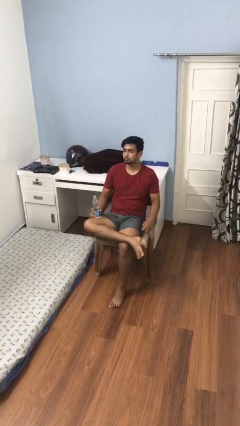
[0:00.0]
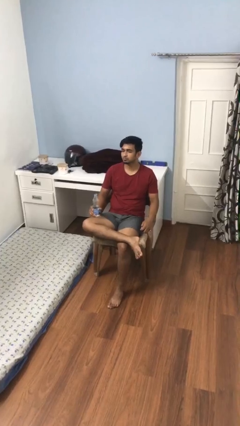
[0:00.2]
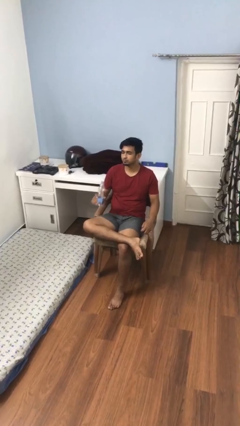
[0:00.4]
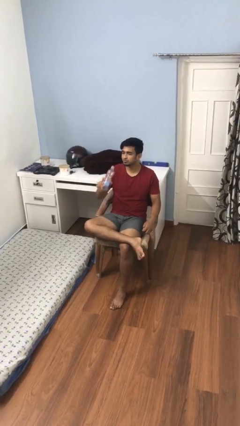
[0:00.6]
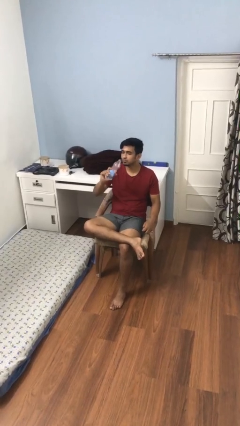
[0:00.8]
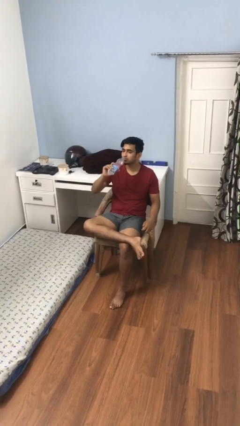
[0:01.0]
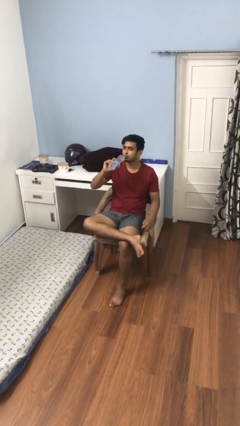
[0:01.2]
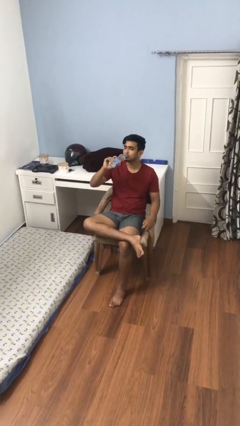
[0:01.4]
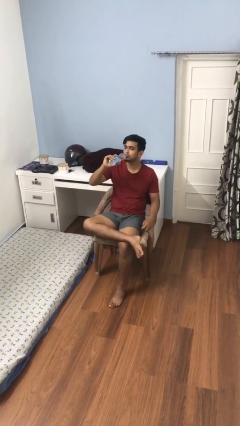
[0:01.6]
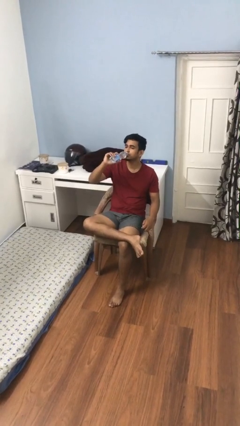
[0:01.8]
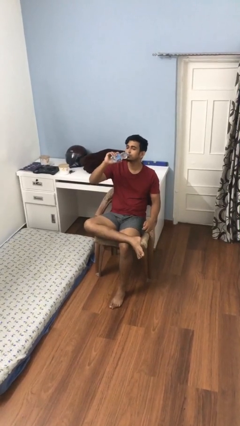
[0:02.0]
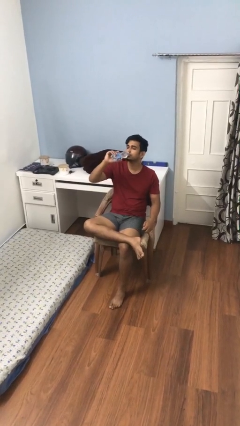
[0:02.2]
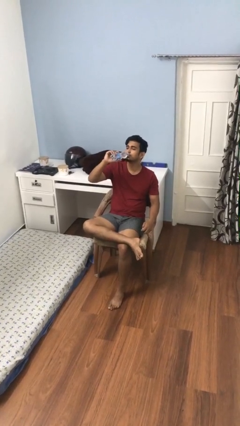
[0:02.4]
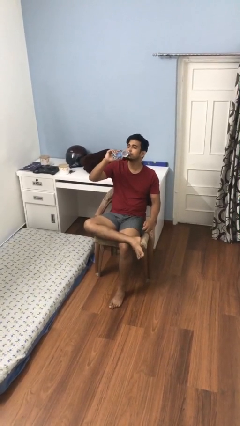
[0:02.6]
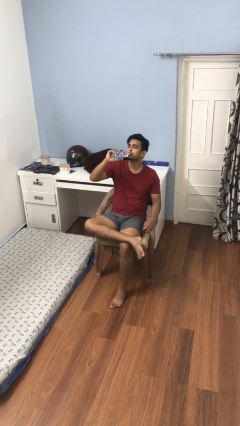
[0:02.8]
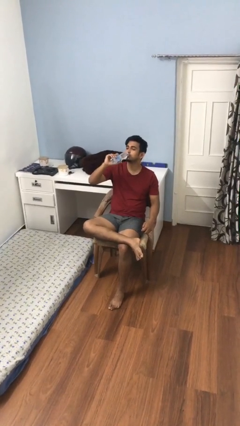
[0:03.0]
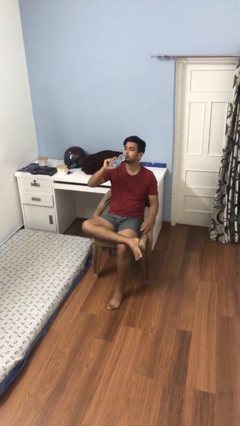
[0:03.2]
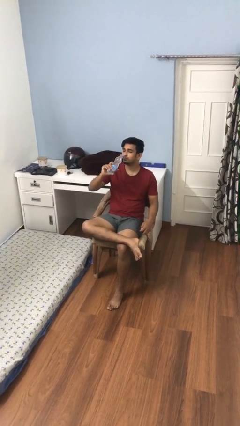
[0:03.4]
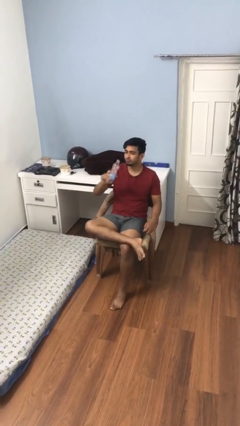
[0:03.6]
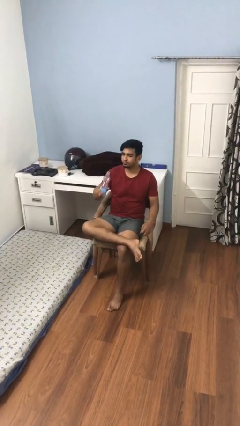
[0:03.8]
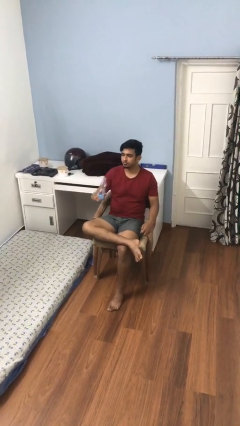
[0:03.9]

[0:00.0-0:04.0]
person drinks from bottle

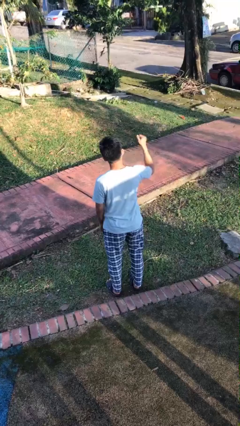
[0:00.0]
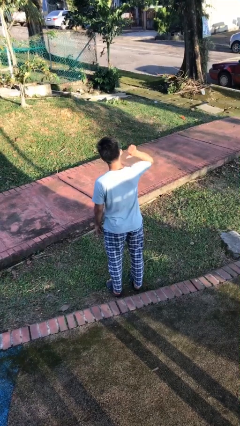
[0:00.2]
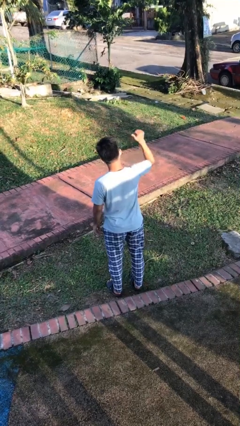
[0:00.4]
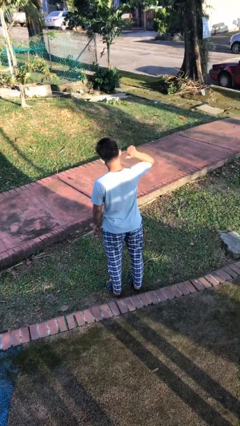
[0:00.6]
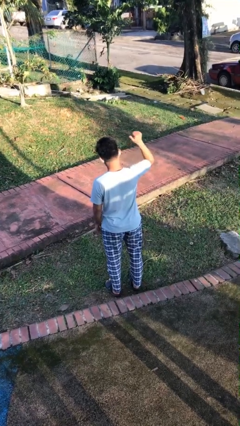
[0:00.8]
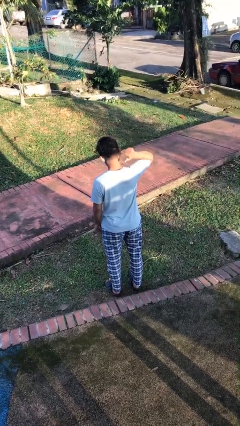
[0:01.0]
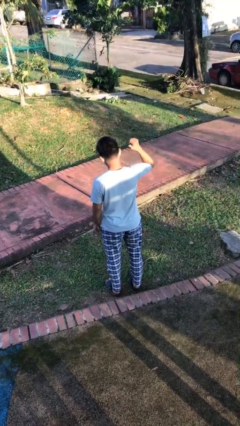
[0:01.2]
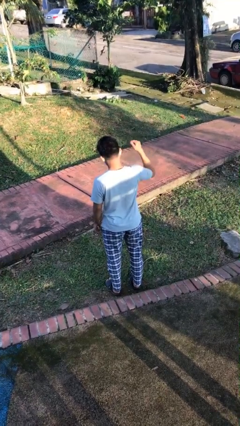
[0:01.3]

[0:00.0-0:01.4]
person gestures behind me

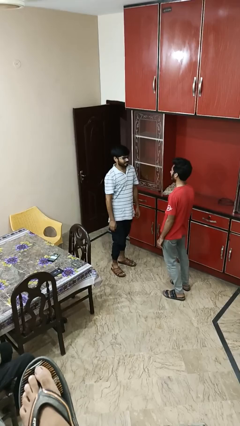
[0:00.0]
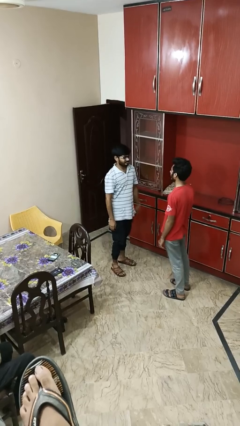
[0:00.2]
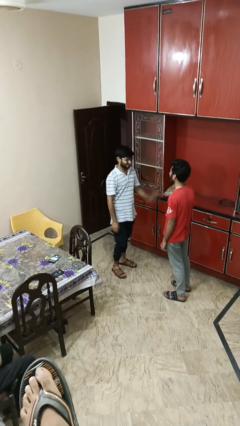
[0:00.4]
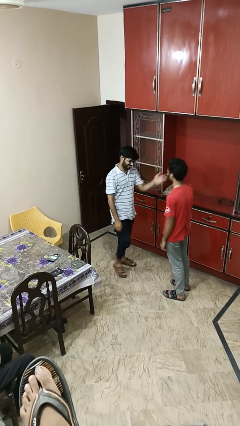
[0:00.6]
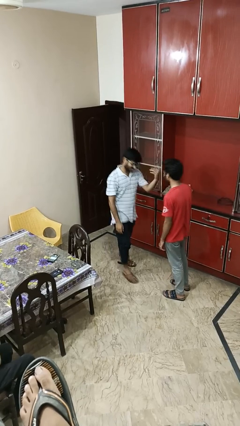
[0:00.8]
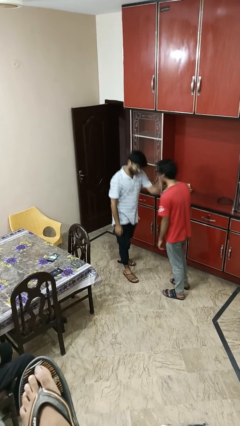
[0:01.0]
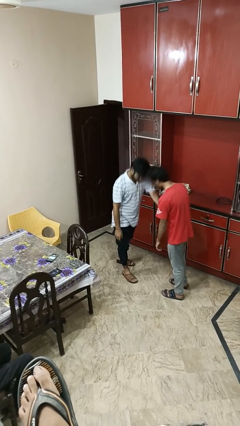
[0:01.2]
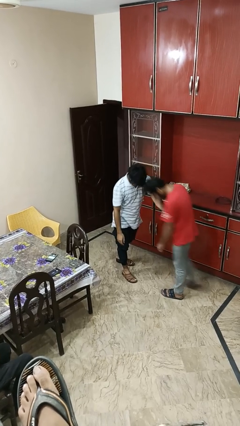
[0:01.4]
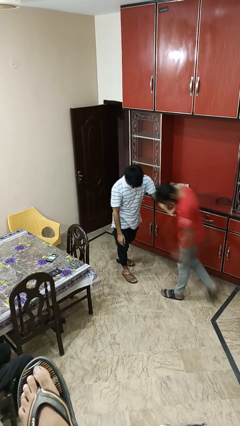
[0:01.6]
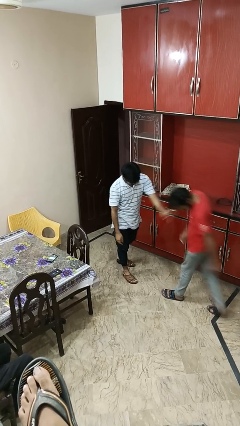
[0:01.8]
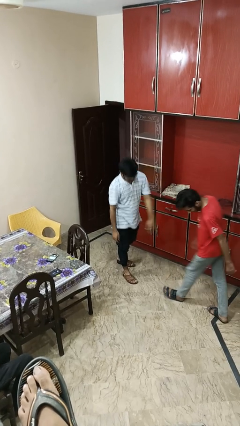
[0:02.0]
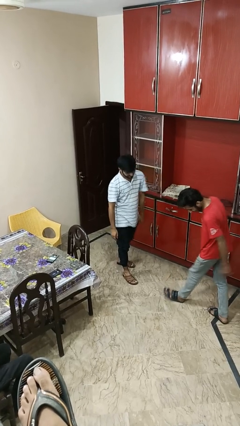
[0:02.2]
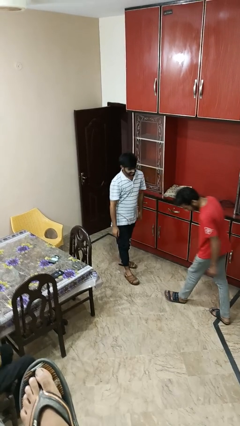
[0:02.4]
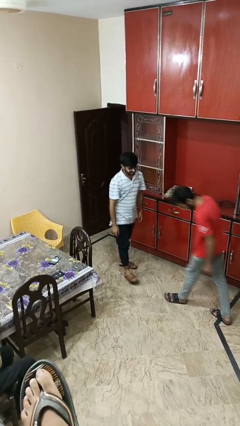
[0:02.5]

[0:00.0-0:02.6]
person shoves person

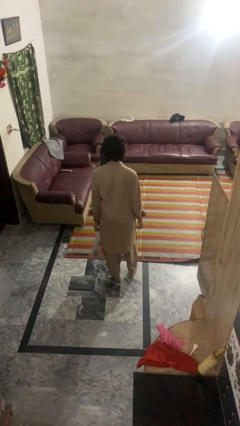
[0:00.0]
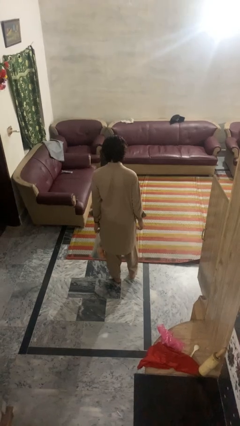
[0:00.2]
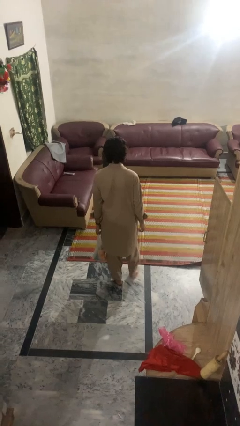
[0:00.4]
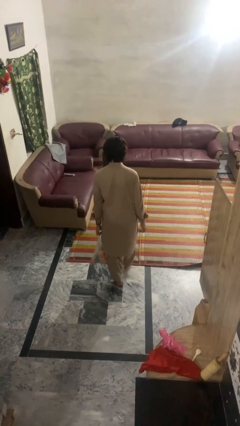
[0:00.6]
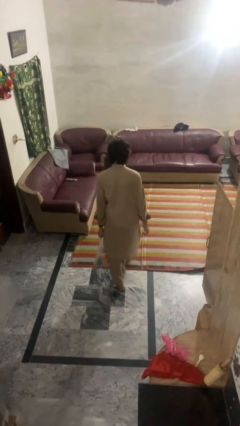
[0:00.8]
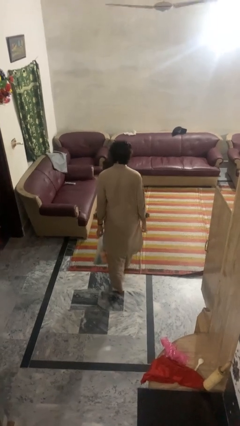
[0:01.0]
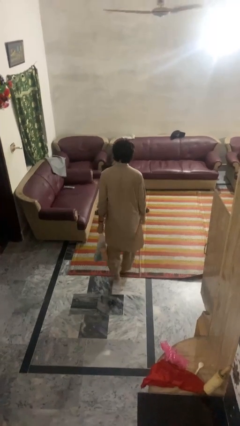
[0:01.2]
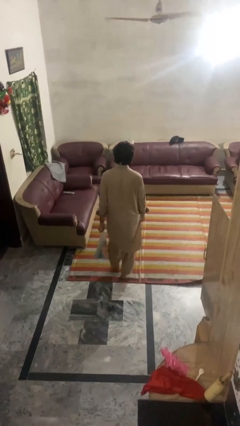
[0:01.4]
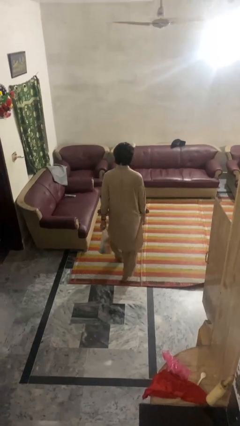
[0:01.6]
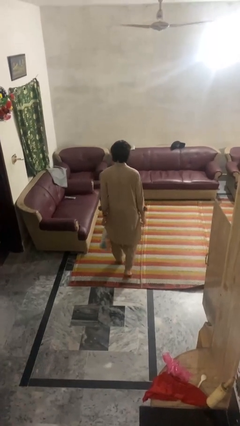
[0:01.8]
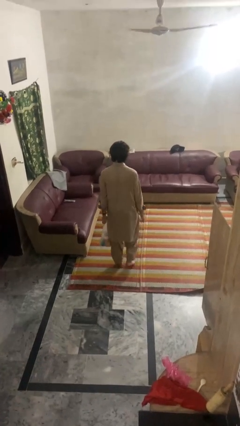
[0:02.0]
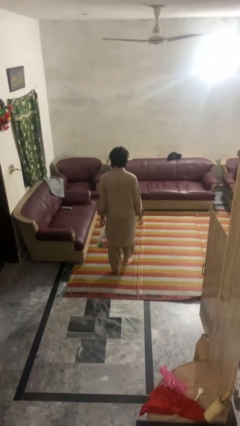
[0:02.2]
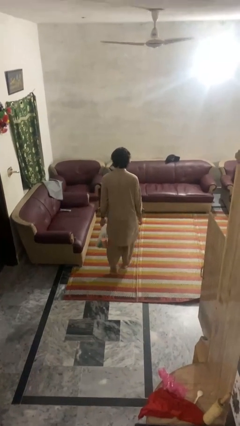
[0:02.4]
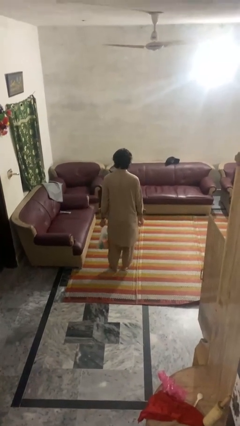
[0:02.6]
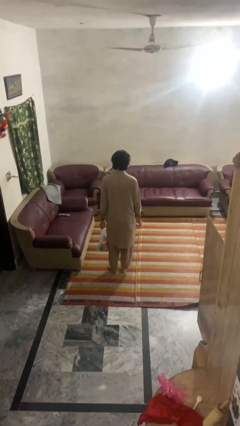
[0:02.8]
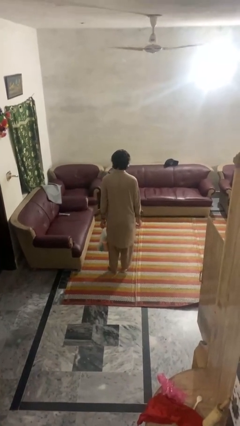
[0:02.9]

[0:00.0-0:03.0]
person carries groceries

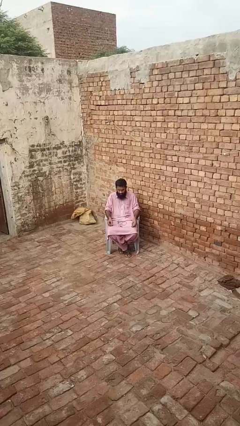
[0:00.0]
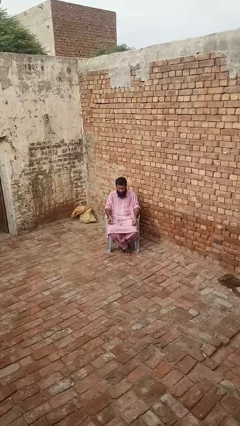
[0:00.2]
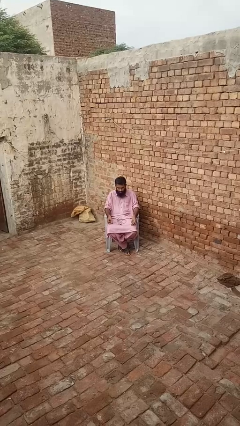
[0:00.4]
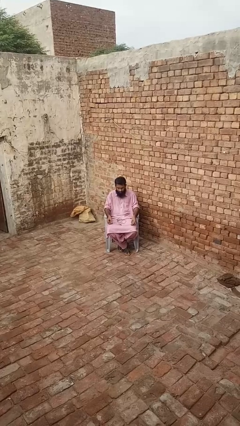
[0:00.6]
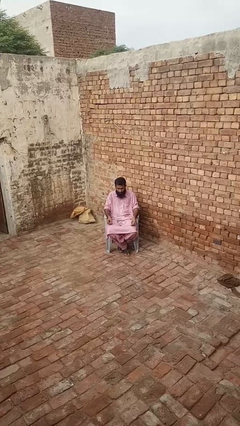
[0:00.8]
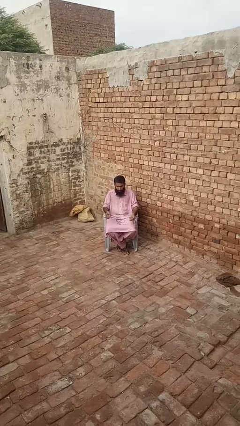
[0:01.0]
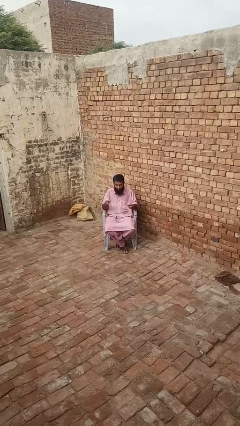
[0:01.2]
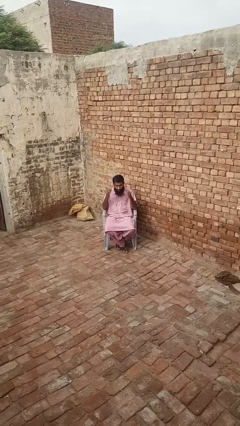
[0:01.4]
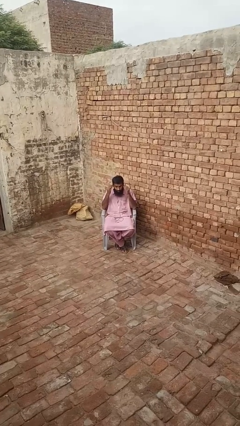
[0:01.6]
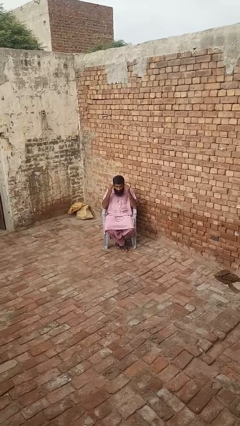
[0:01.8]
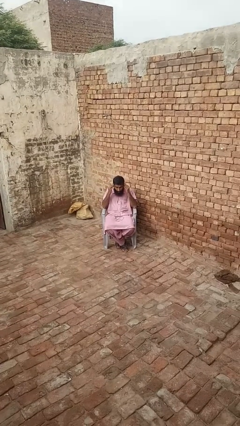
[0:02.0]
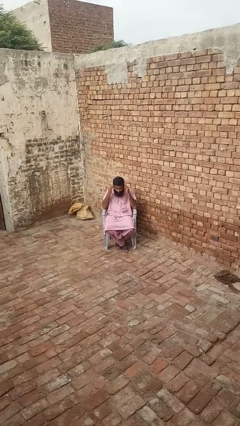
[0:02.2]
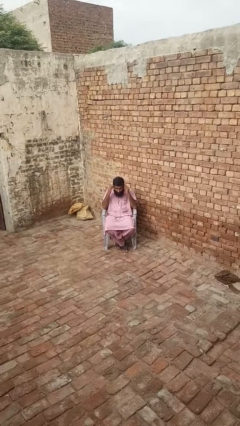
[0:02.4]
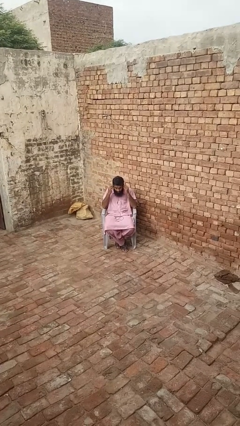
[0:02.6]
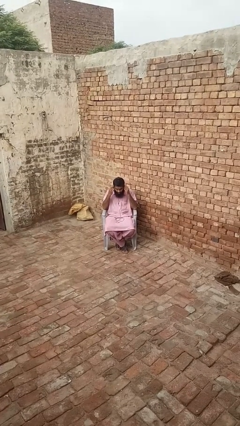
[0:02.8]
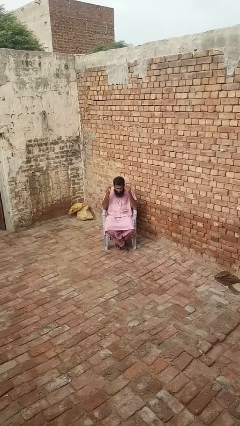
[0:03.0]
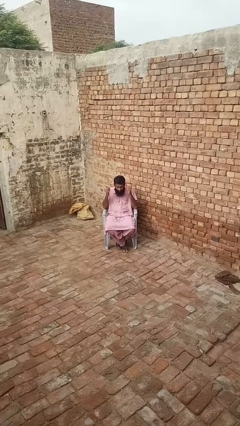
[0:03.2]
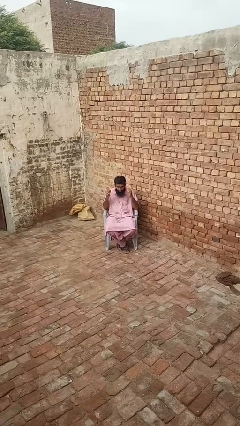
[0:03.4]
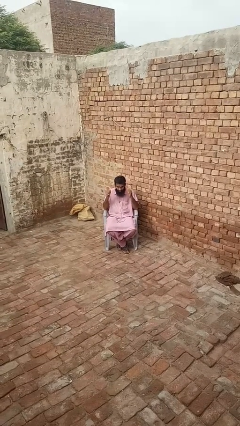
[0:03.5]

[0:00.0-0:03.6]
person puts on headphones

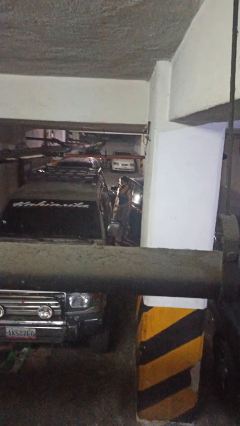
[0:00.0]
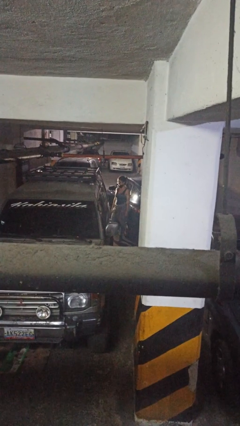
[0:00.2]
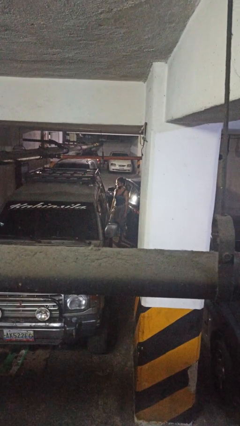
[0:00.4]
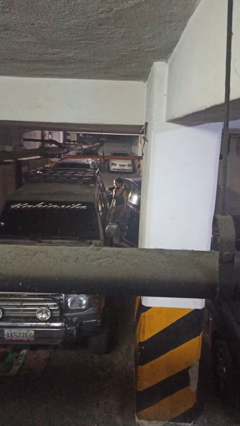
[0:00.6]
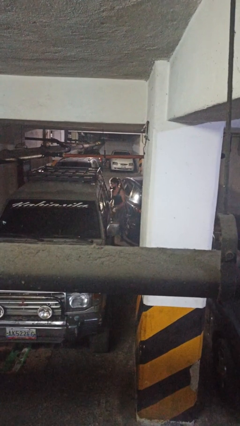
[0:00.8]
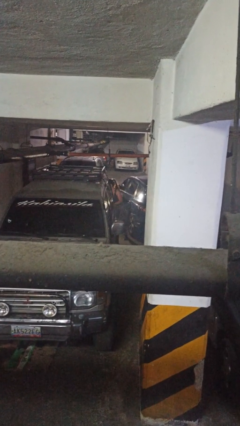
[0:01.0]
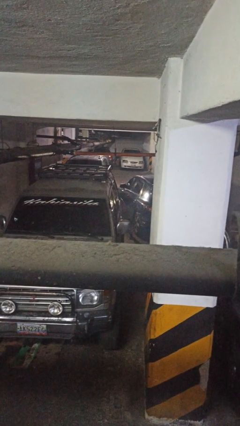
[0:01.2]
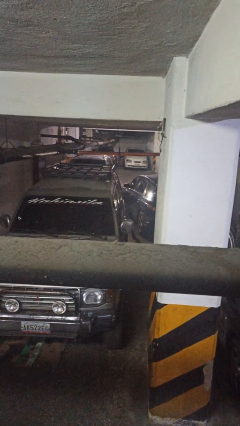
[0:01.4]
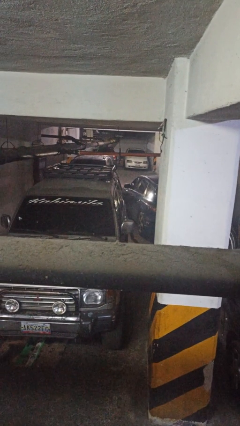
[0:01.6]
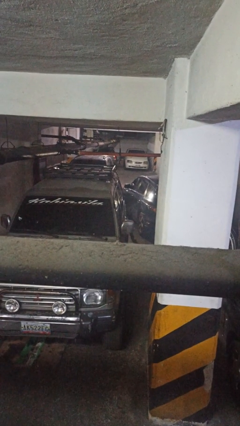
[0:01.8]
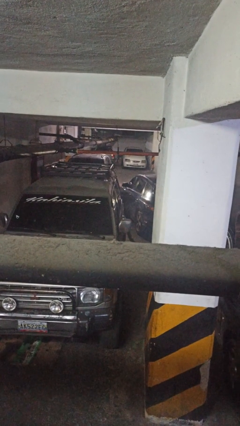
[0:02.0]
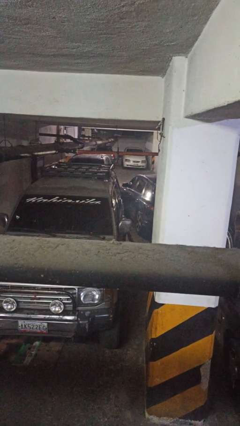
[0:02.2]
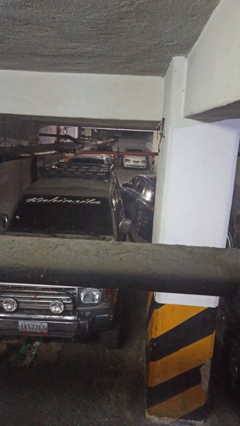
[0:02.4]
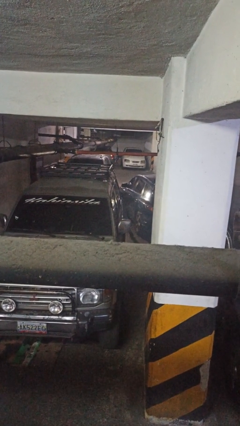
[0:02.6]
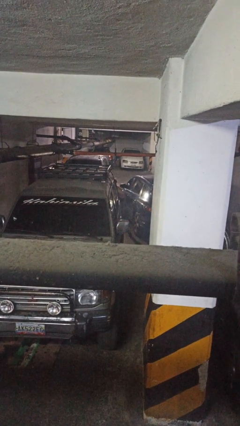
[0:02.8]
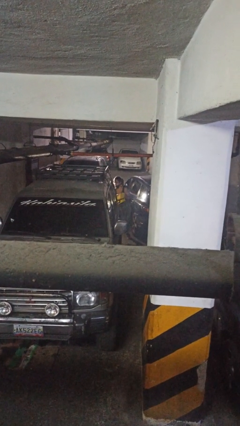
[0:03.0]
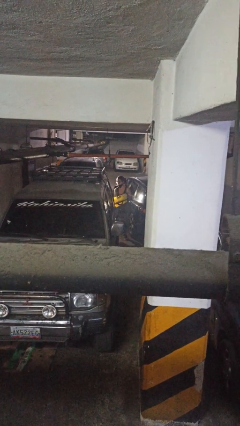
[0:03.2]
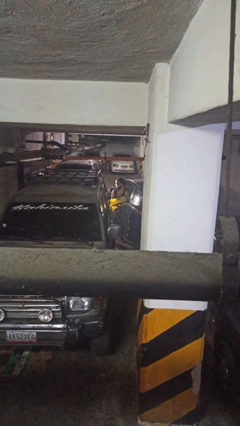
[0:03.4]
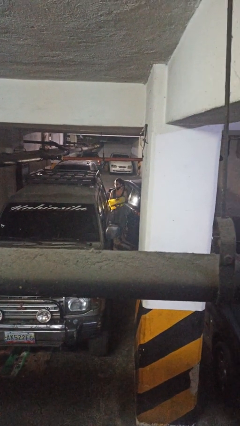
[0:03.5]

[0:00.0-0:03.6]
person unloads car
